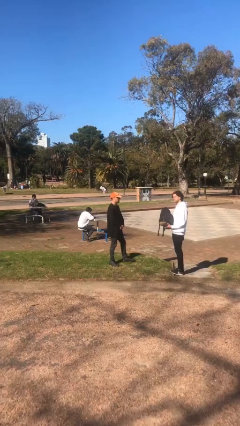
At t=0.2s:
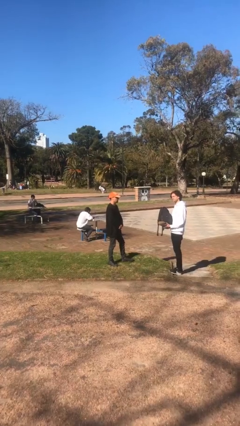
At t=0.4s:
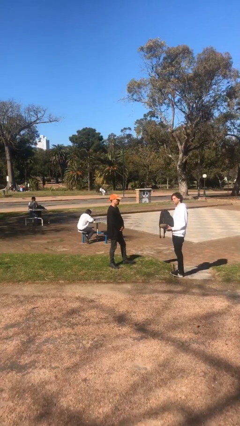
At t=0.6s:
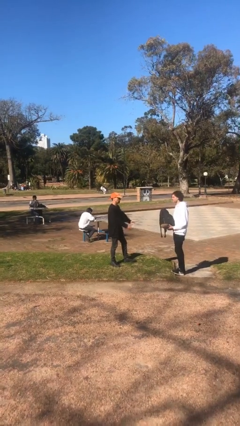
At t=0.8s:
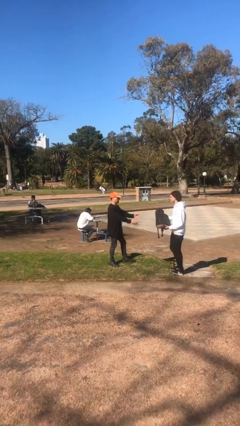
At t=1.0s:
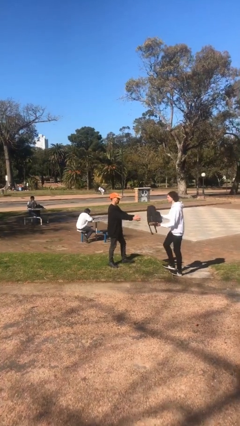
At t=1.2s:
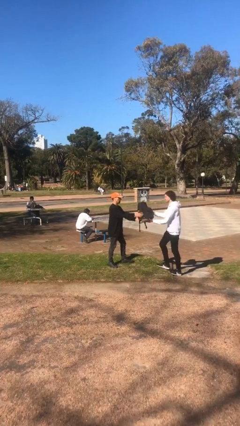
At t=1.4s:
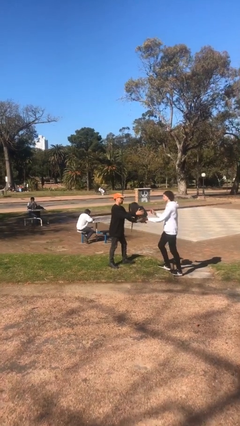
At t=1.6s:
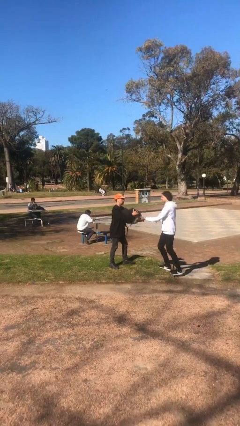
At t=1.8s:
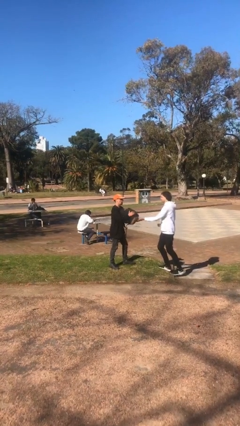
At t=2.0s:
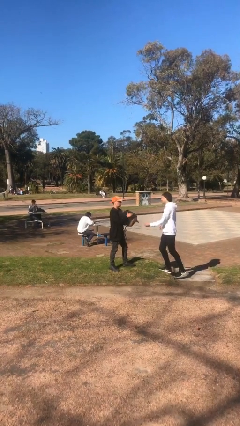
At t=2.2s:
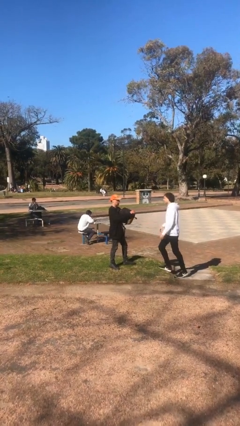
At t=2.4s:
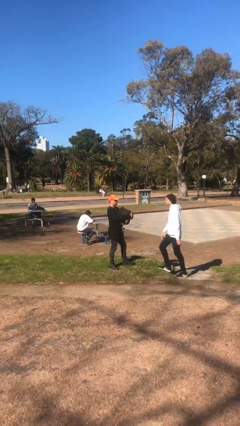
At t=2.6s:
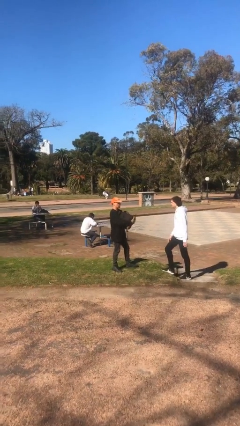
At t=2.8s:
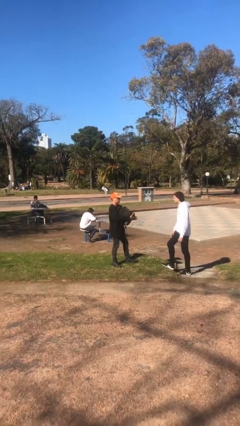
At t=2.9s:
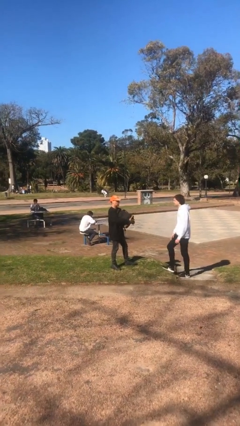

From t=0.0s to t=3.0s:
person transfers object to person

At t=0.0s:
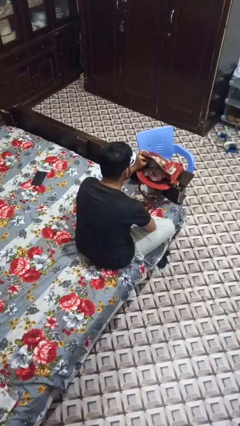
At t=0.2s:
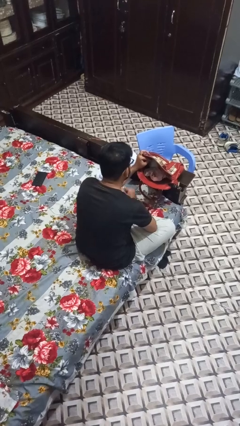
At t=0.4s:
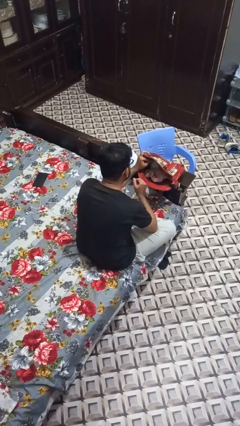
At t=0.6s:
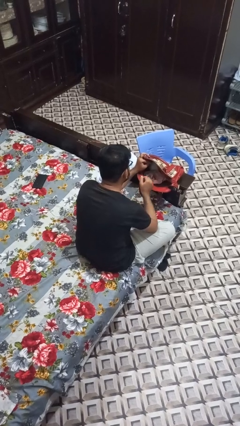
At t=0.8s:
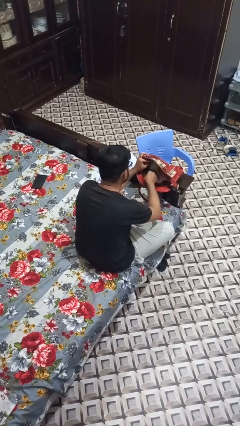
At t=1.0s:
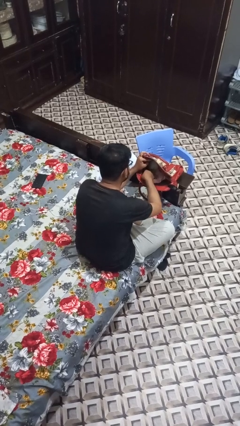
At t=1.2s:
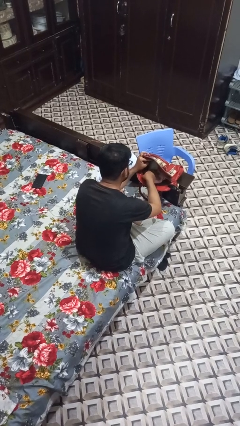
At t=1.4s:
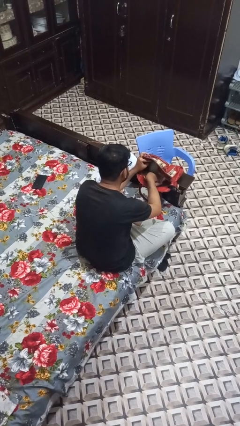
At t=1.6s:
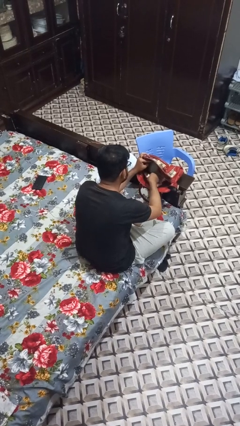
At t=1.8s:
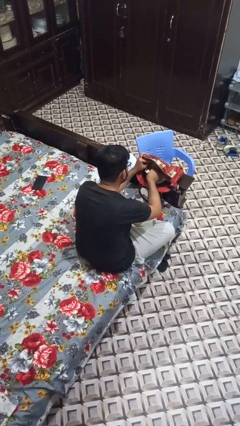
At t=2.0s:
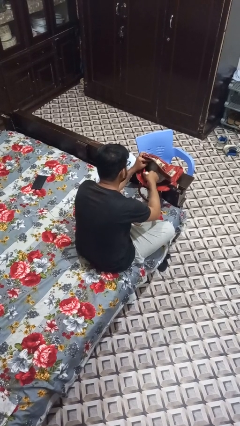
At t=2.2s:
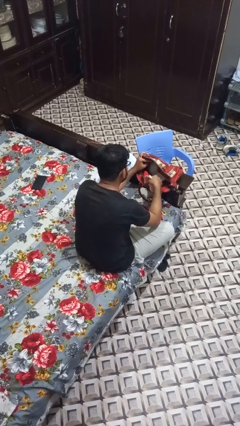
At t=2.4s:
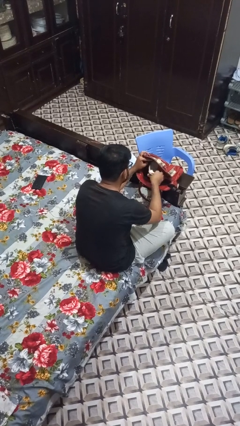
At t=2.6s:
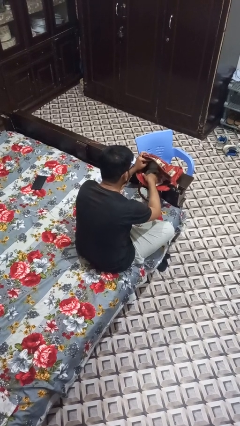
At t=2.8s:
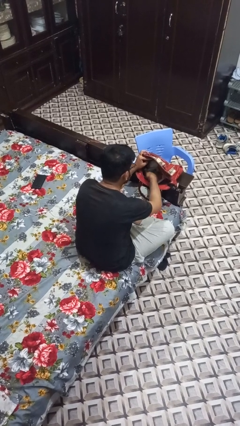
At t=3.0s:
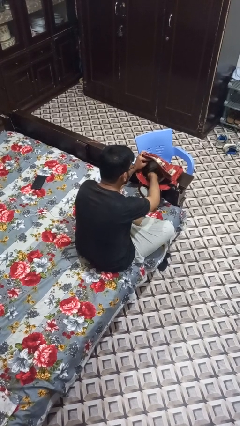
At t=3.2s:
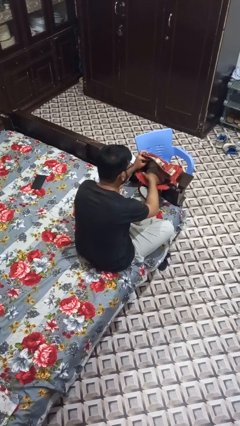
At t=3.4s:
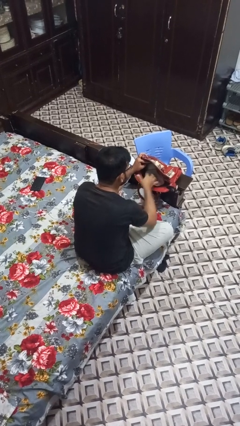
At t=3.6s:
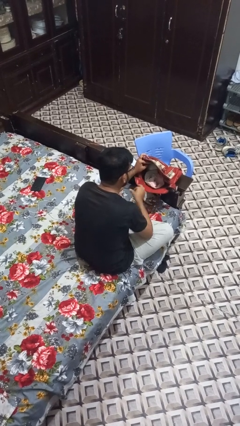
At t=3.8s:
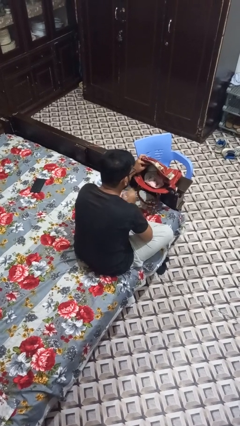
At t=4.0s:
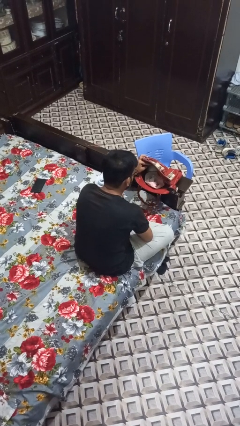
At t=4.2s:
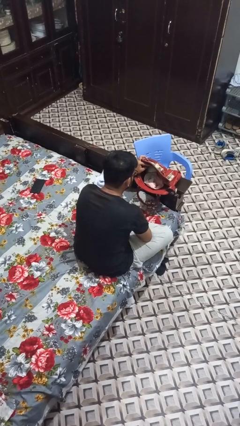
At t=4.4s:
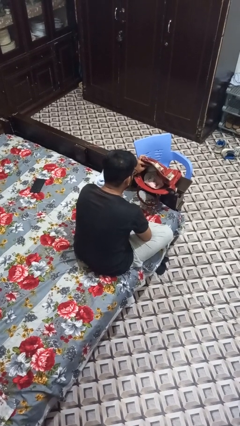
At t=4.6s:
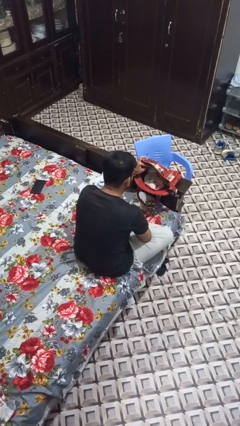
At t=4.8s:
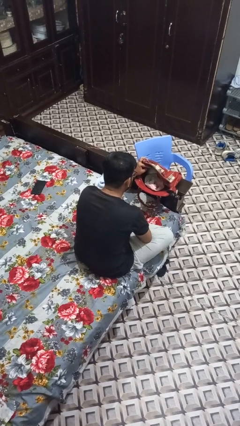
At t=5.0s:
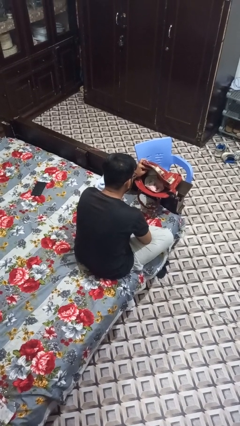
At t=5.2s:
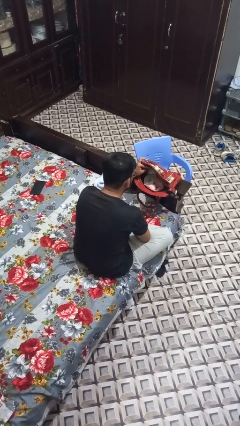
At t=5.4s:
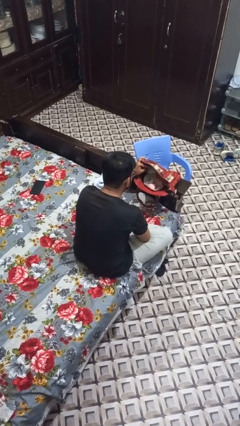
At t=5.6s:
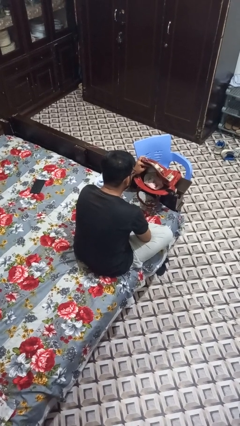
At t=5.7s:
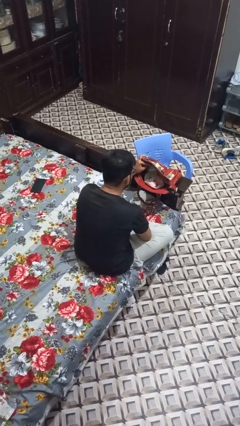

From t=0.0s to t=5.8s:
person puts object into purse

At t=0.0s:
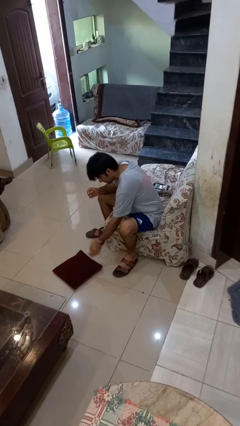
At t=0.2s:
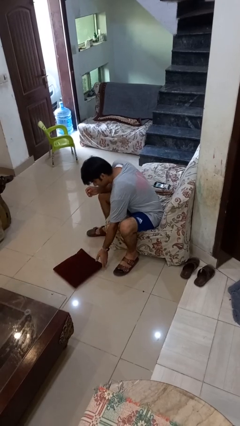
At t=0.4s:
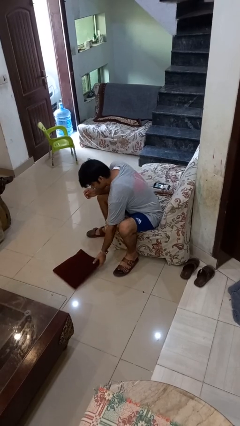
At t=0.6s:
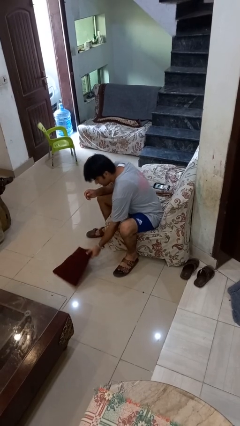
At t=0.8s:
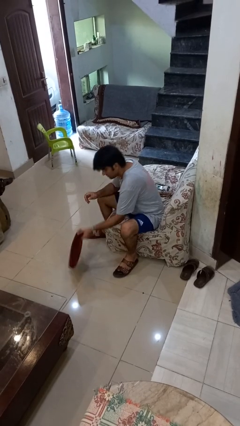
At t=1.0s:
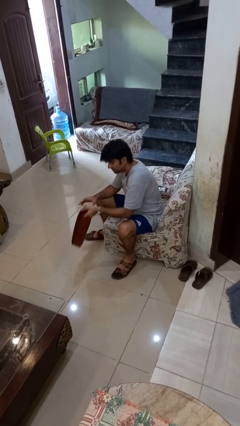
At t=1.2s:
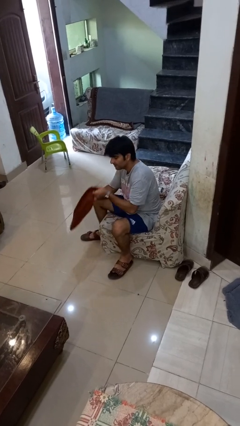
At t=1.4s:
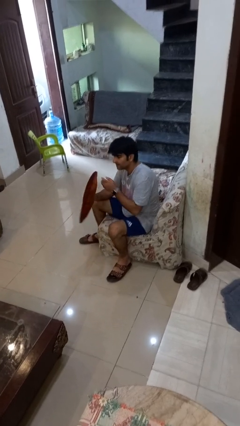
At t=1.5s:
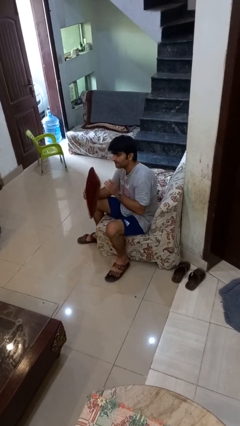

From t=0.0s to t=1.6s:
person picks up object from floor

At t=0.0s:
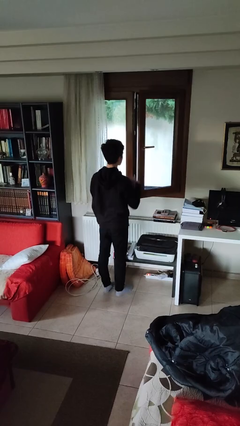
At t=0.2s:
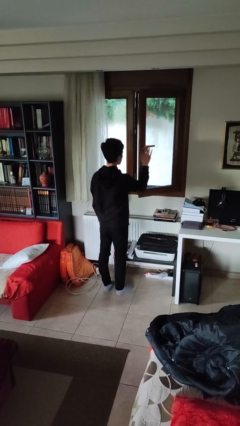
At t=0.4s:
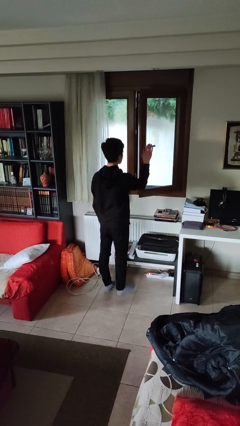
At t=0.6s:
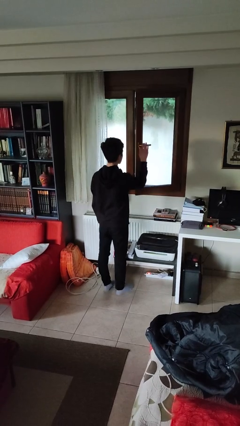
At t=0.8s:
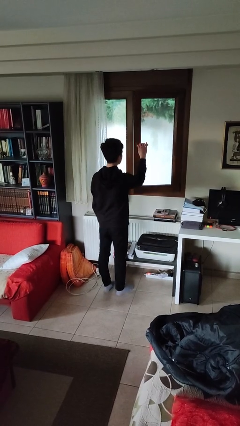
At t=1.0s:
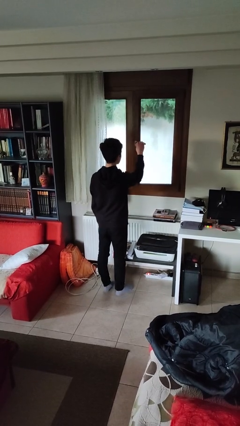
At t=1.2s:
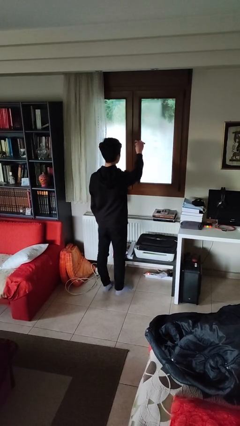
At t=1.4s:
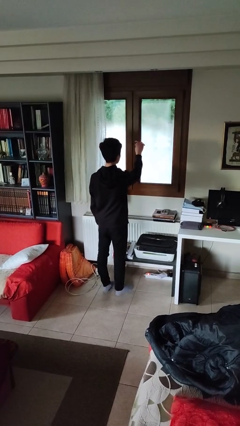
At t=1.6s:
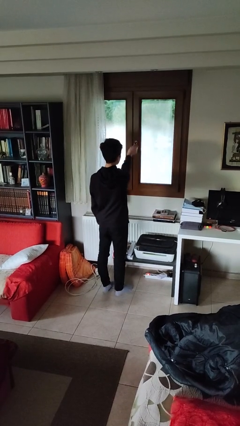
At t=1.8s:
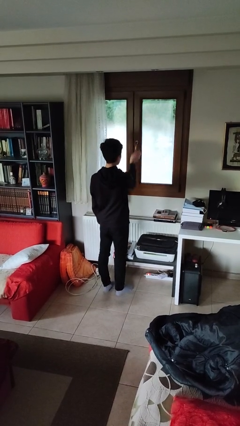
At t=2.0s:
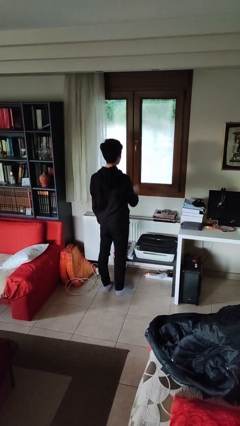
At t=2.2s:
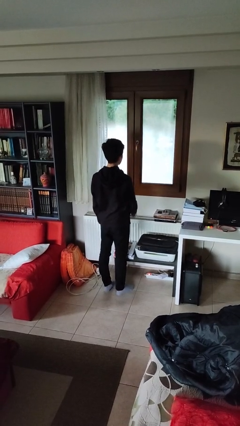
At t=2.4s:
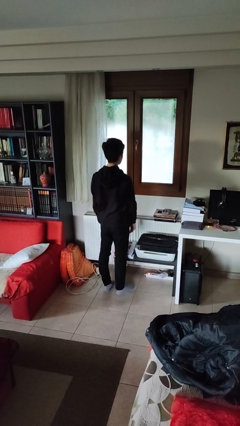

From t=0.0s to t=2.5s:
person closes home window

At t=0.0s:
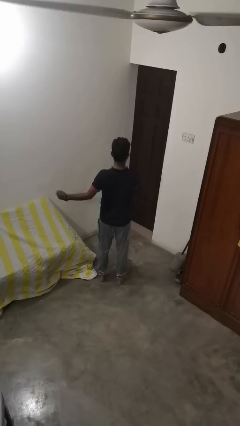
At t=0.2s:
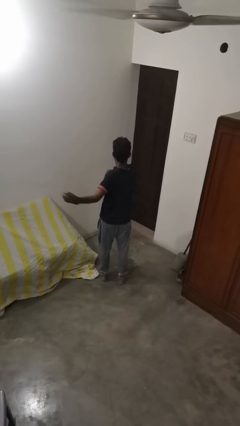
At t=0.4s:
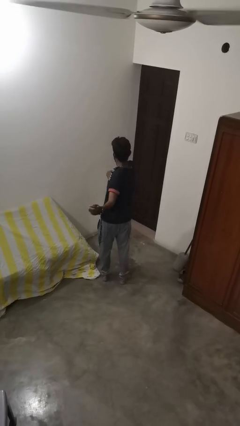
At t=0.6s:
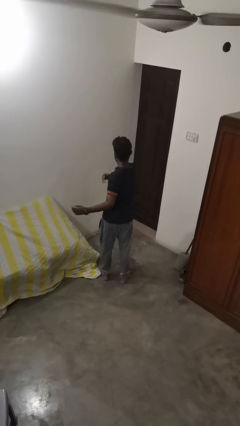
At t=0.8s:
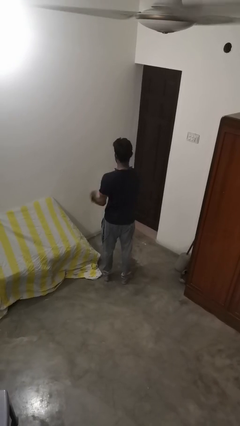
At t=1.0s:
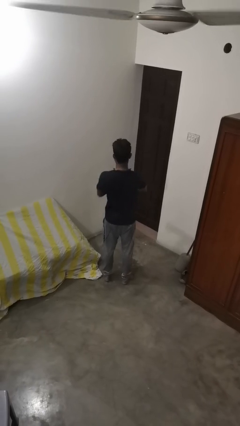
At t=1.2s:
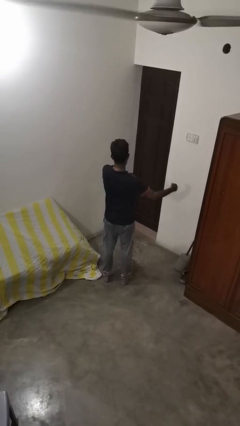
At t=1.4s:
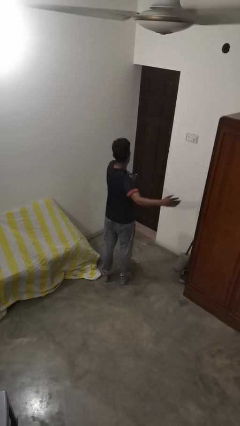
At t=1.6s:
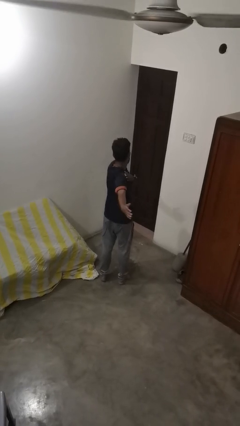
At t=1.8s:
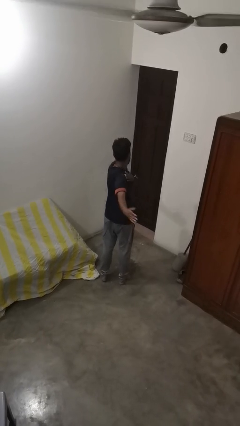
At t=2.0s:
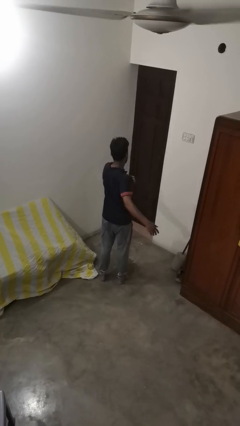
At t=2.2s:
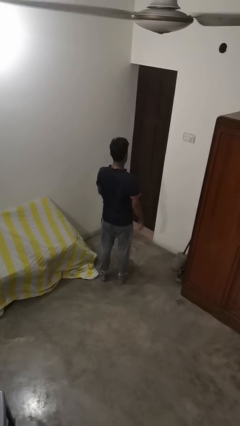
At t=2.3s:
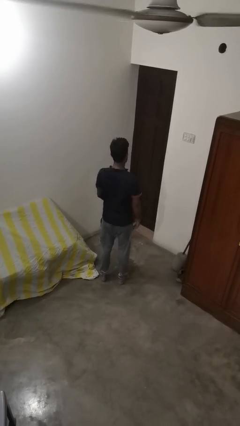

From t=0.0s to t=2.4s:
person stretches arms to side

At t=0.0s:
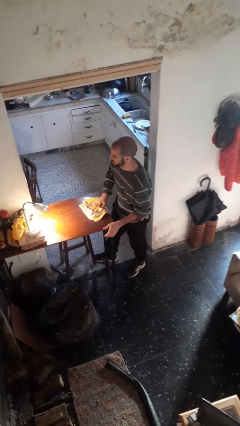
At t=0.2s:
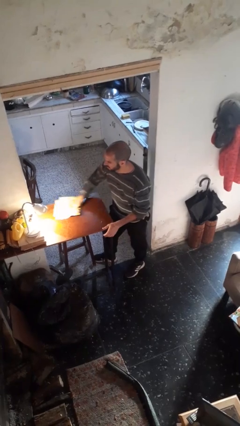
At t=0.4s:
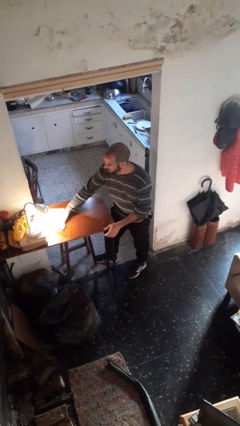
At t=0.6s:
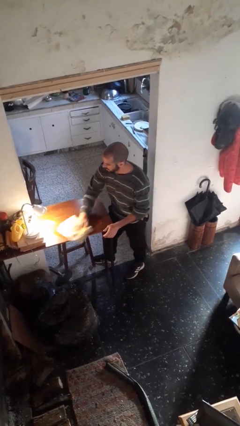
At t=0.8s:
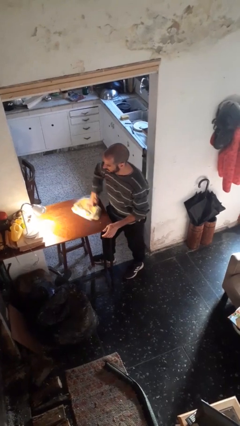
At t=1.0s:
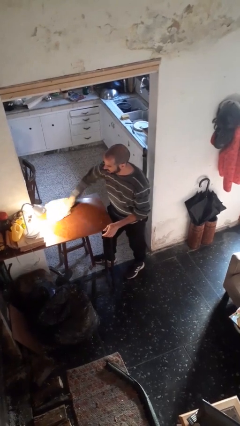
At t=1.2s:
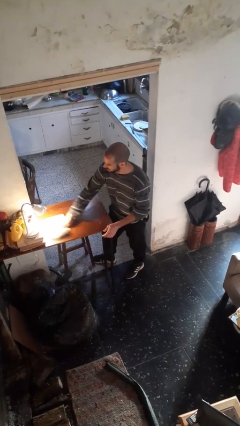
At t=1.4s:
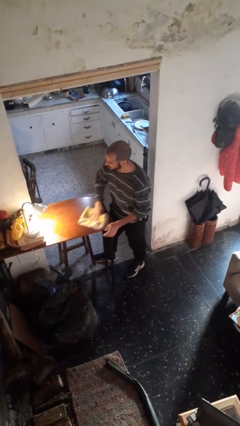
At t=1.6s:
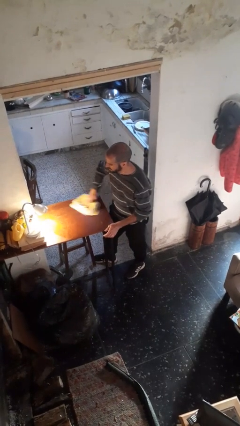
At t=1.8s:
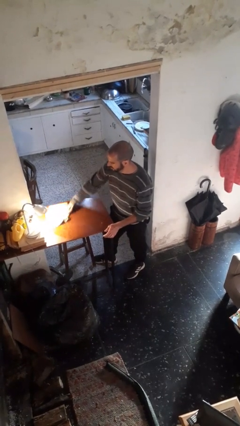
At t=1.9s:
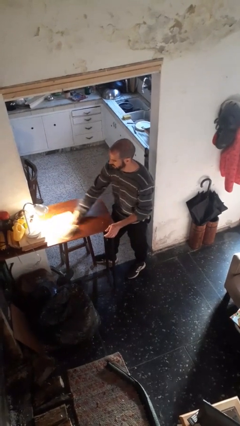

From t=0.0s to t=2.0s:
person cleans table with rag

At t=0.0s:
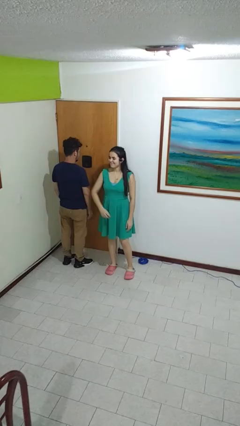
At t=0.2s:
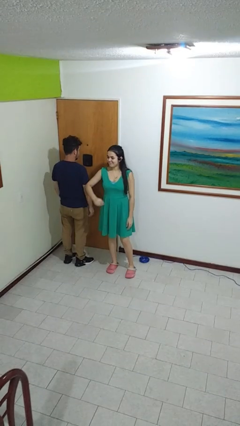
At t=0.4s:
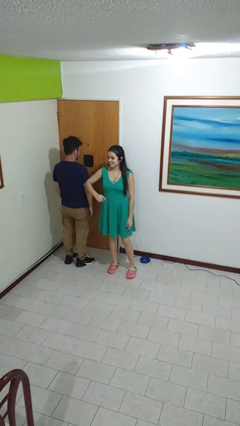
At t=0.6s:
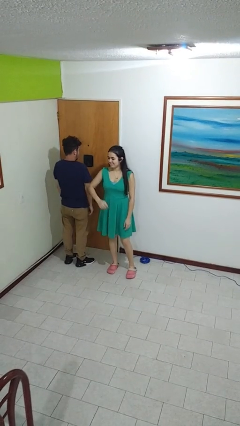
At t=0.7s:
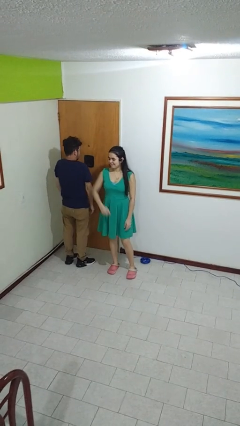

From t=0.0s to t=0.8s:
person nudges person with elbow
